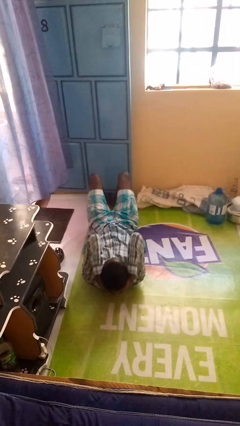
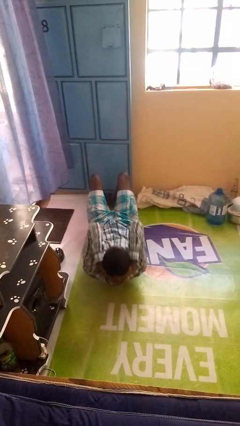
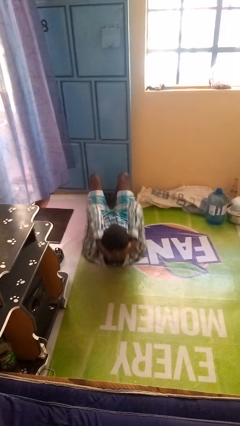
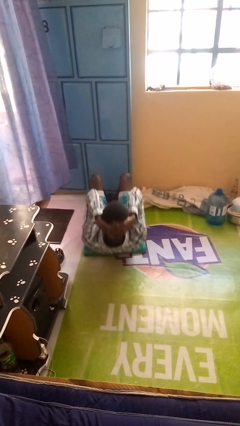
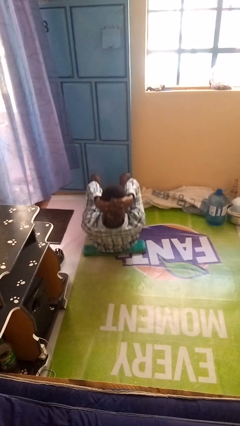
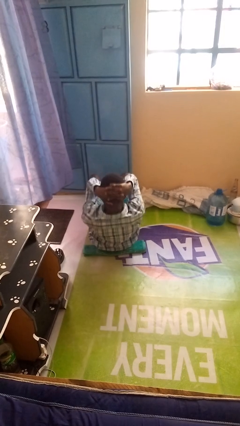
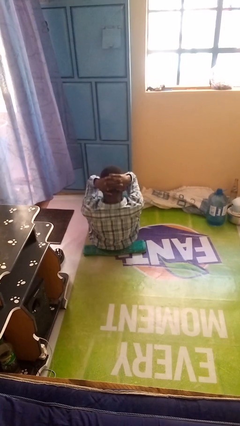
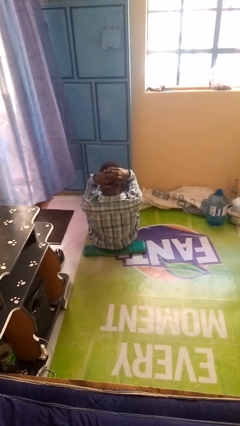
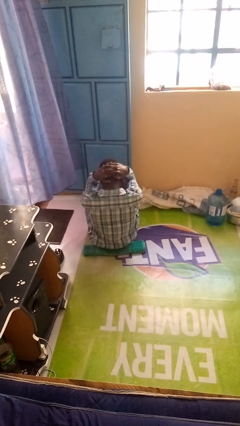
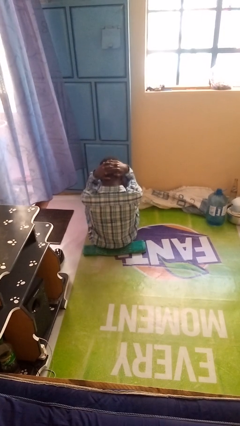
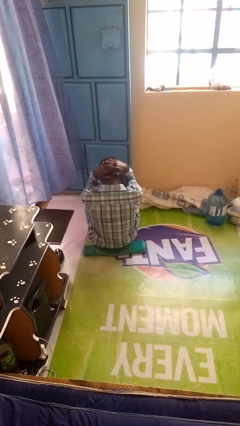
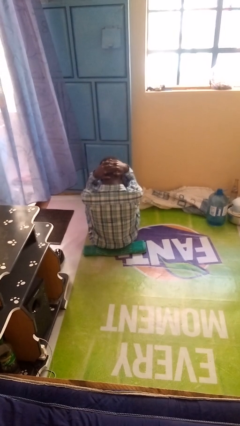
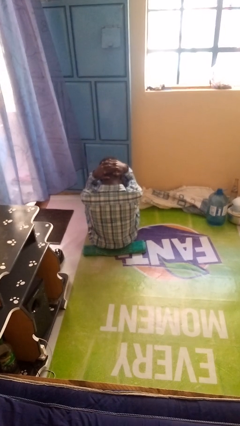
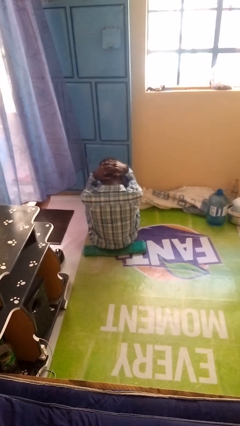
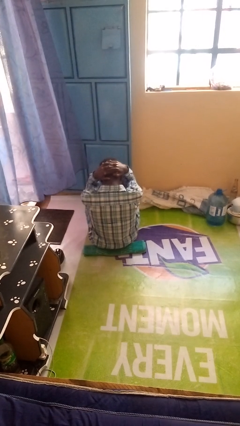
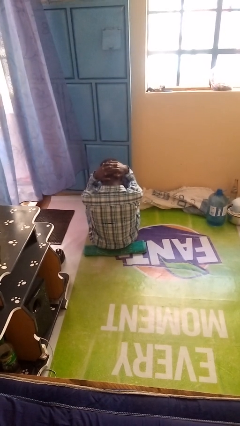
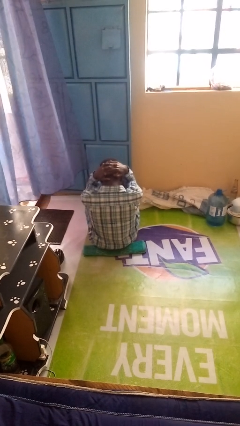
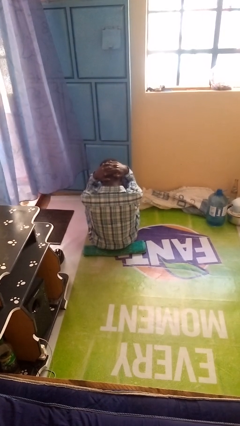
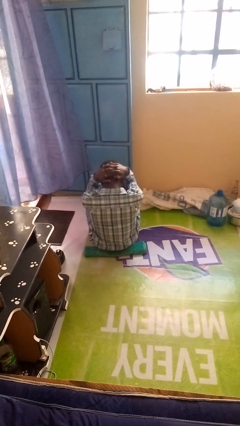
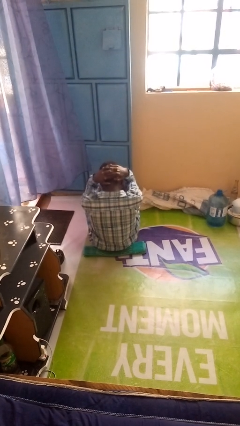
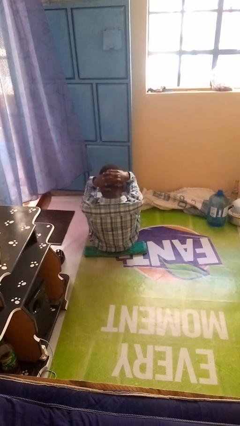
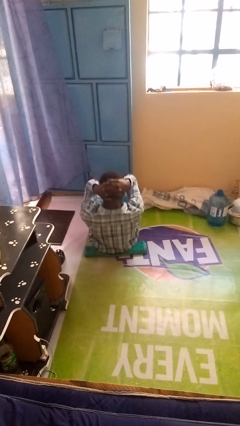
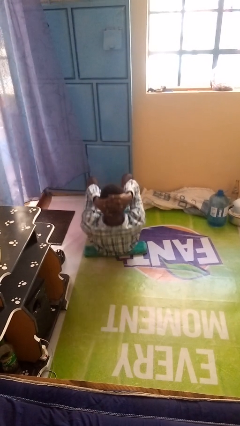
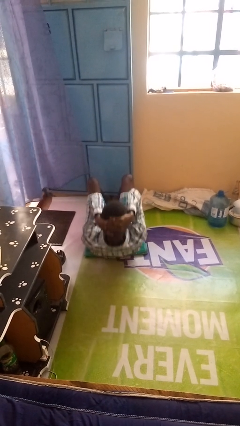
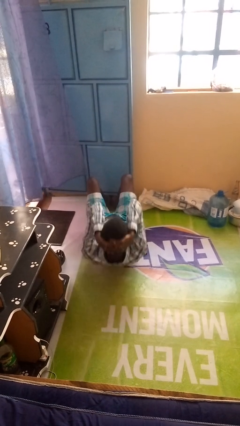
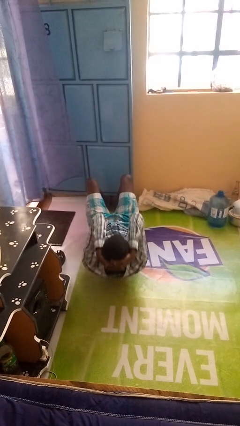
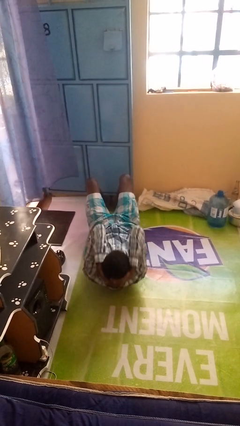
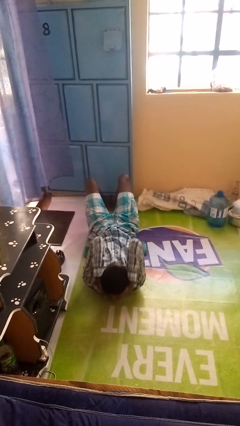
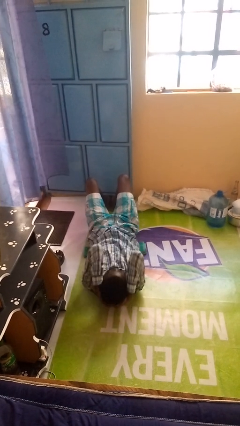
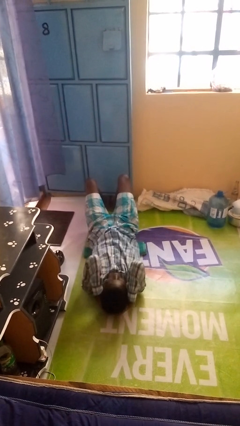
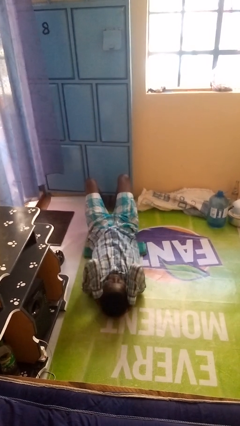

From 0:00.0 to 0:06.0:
person exercises with situp

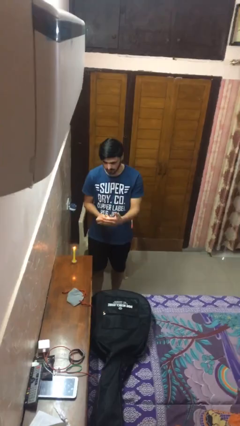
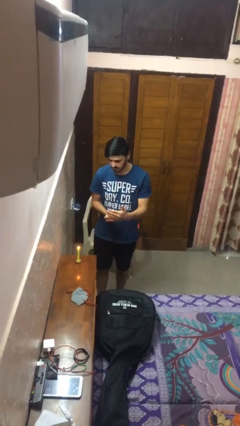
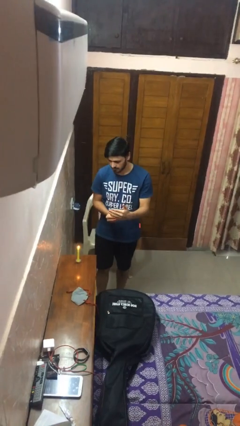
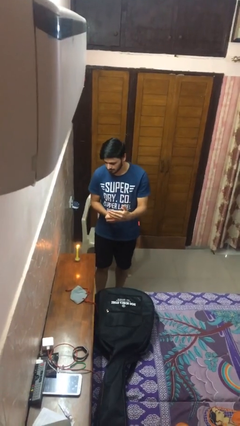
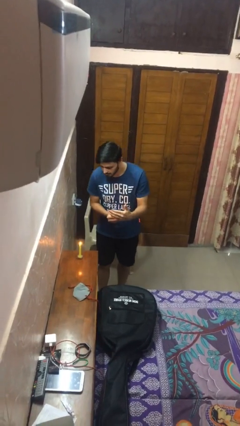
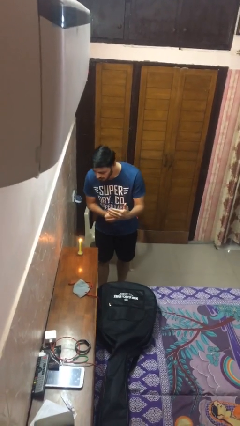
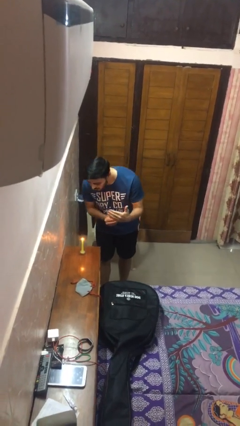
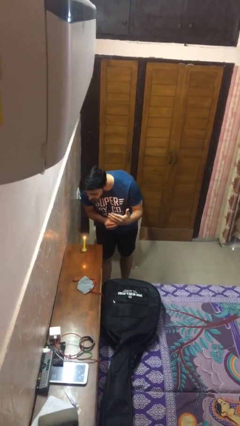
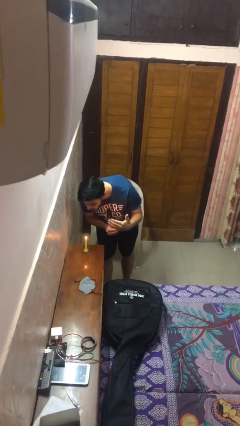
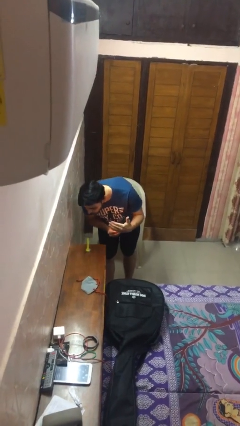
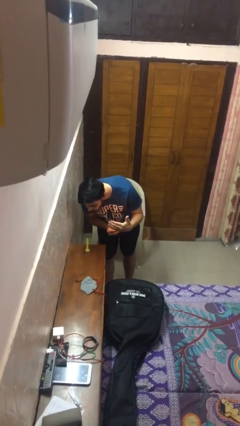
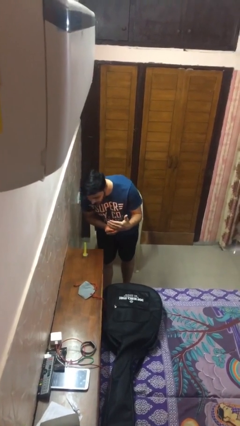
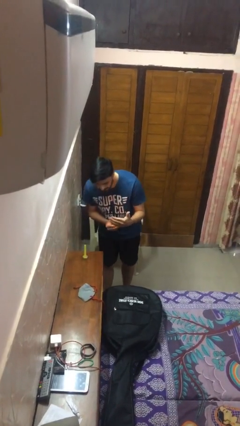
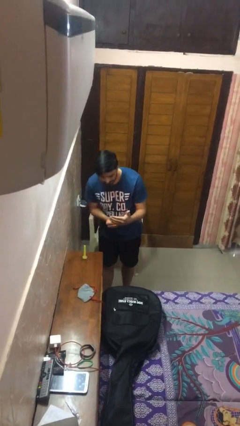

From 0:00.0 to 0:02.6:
person extinguishes candle

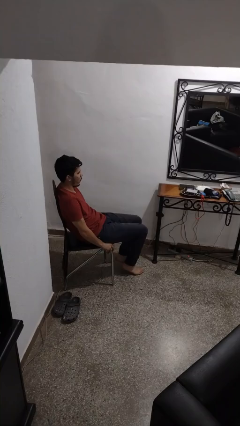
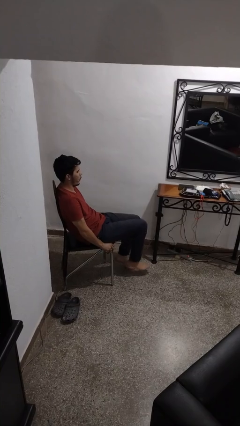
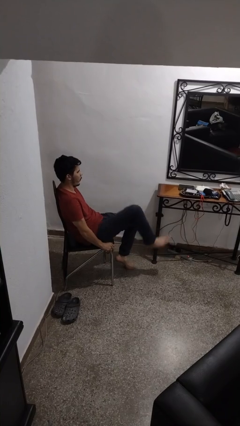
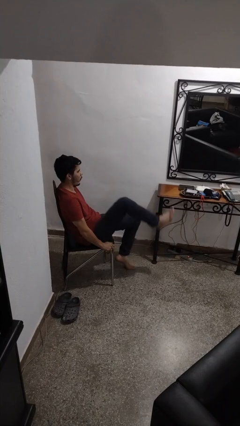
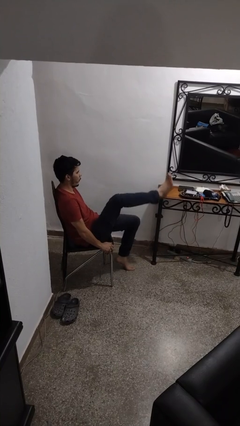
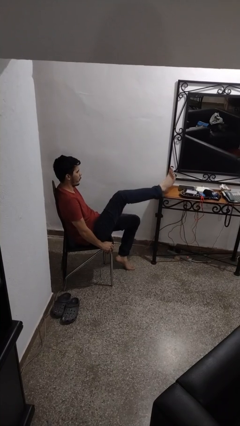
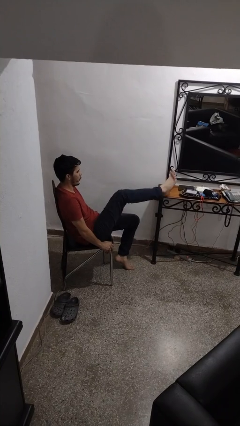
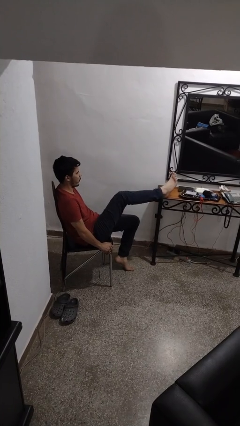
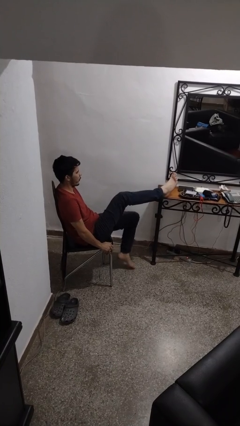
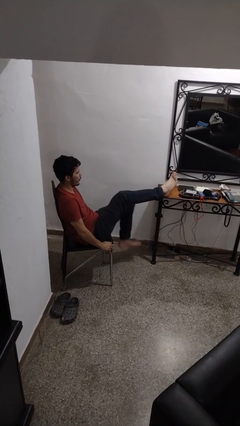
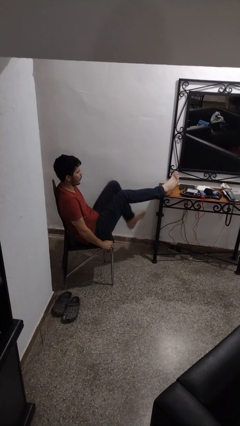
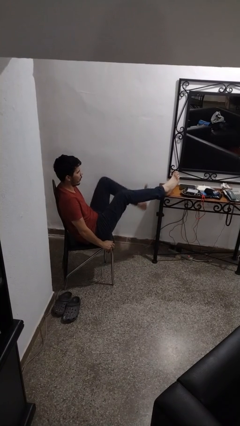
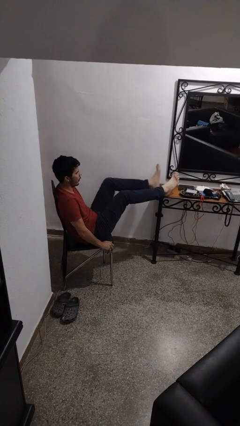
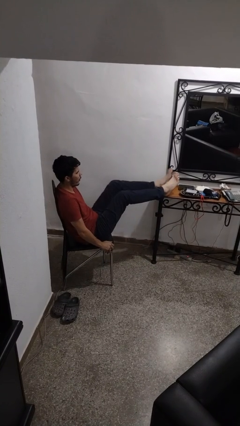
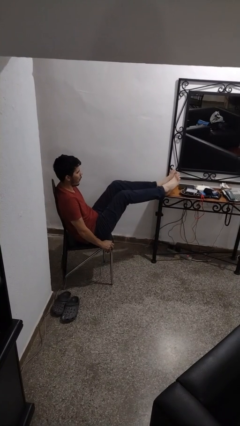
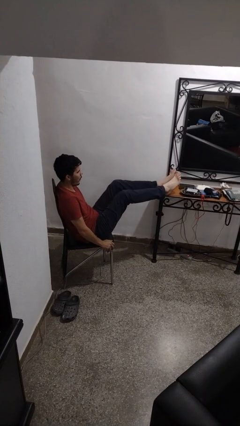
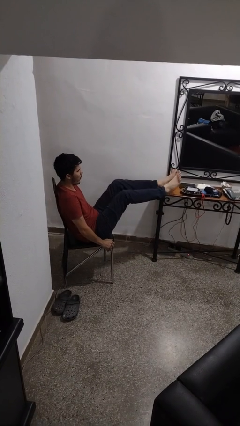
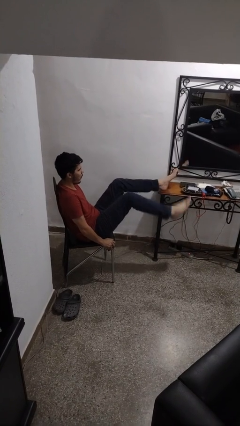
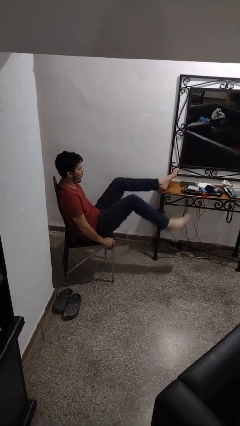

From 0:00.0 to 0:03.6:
person puts feet up

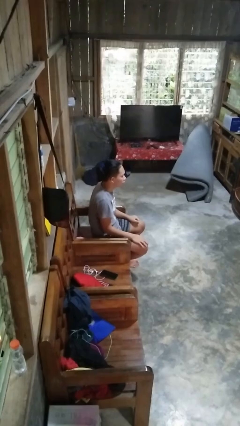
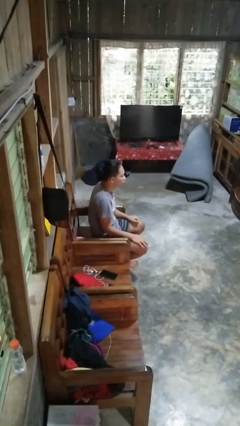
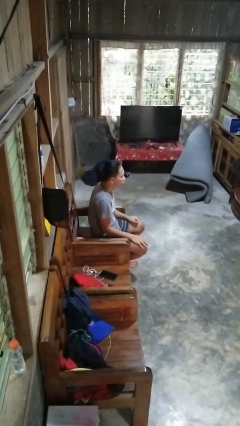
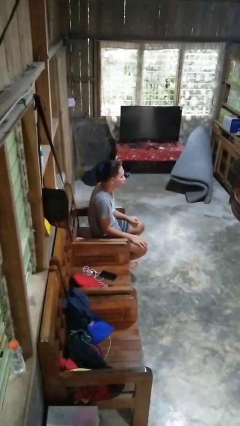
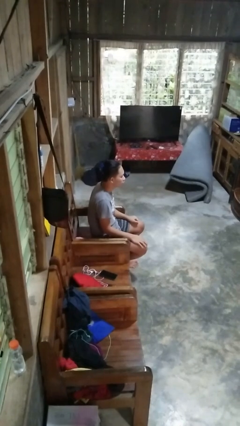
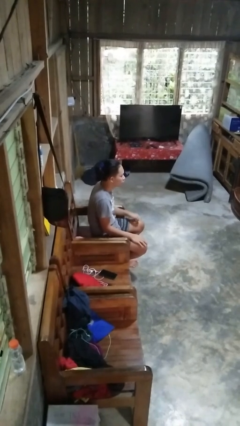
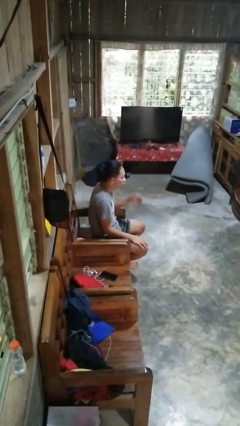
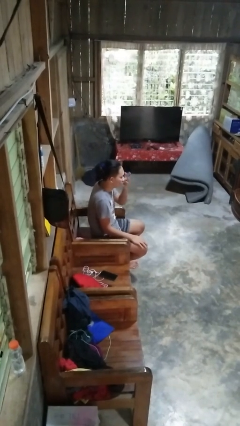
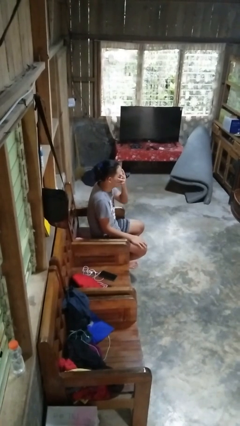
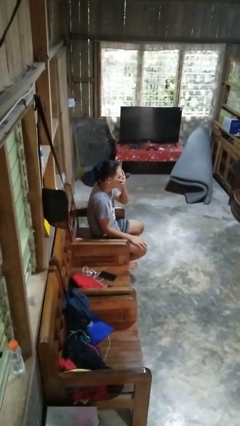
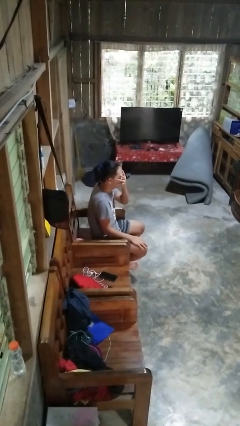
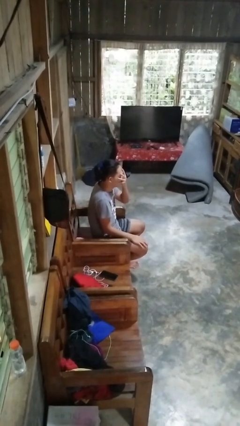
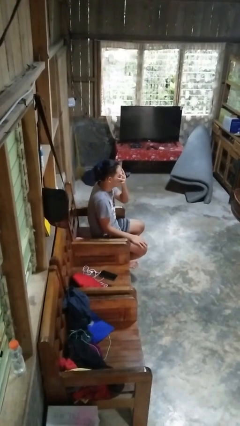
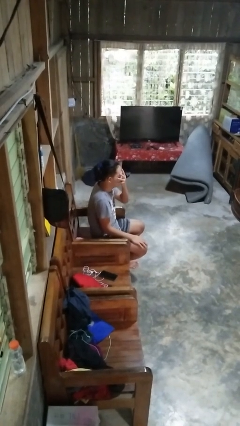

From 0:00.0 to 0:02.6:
person covers face with hands

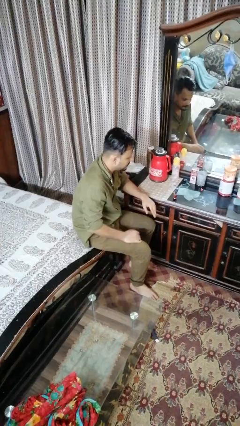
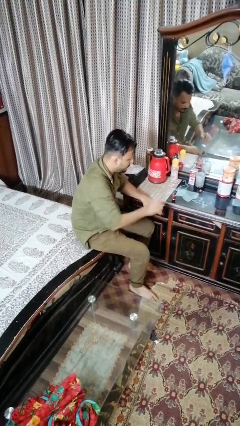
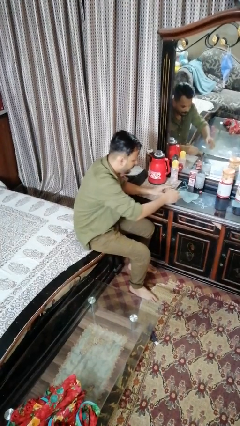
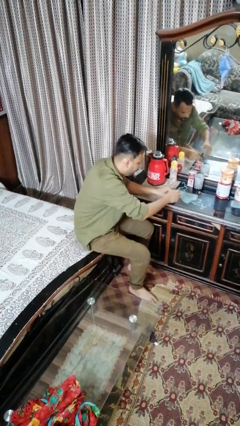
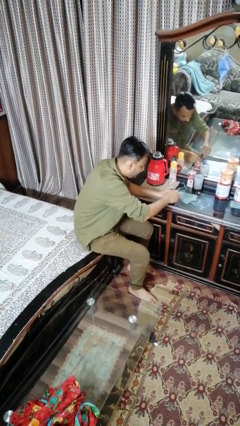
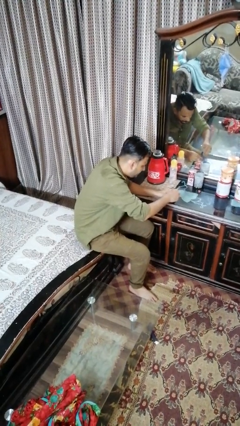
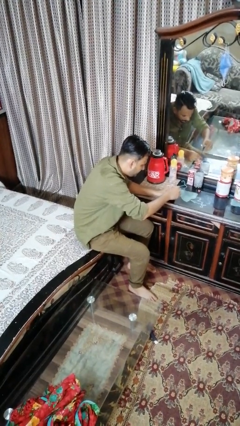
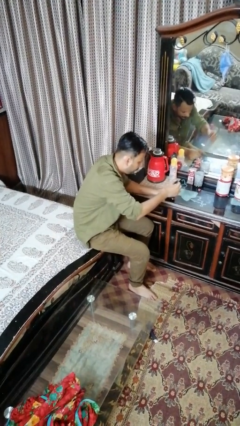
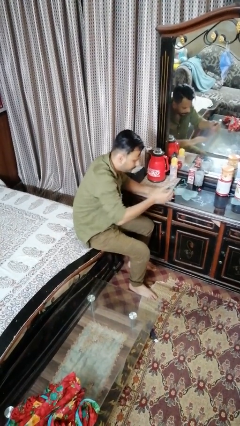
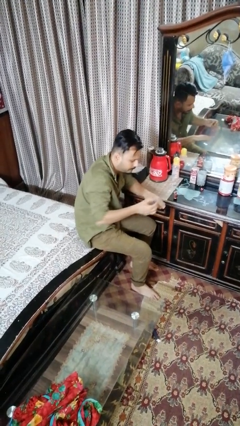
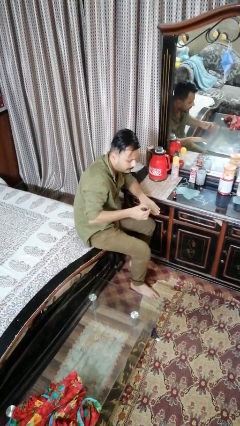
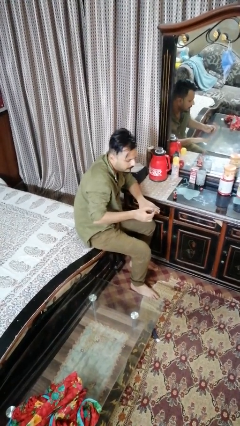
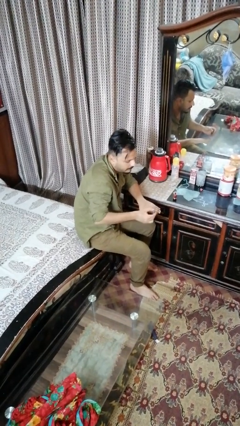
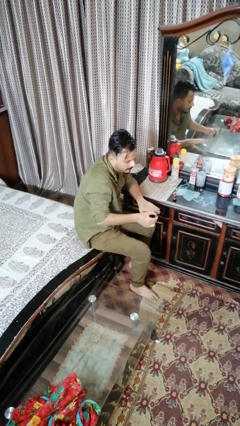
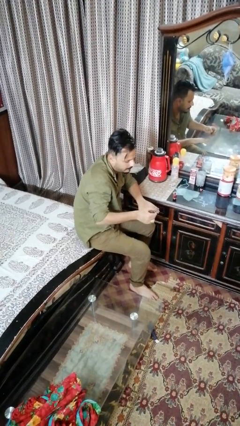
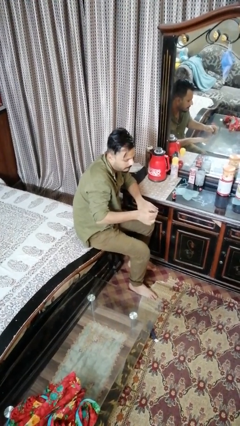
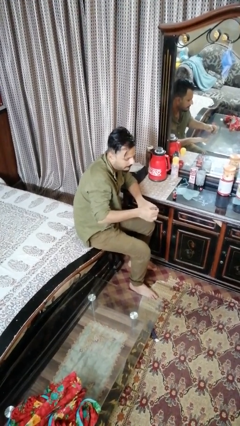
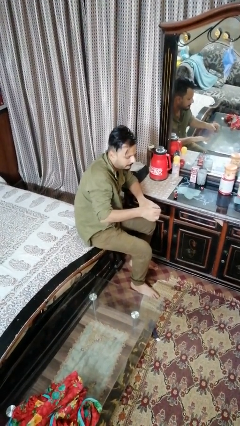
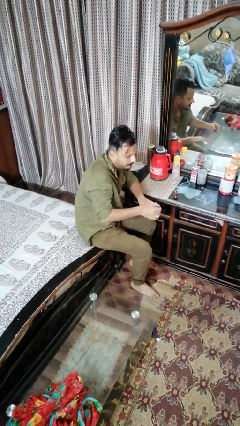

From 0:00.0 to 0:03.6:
person paints fingernails
